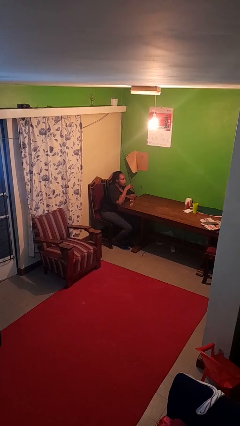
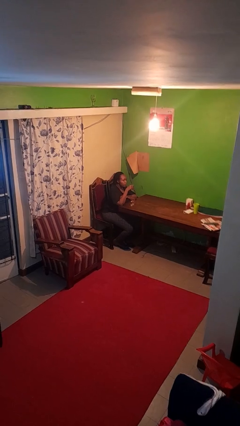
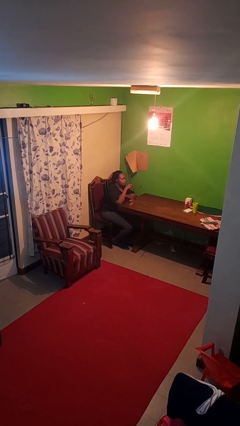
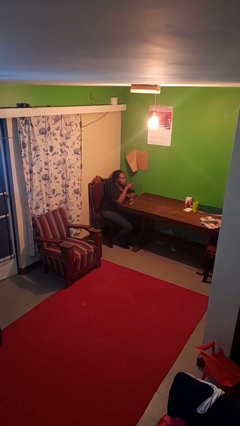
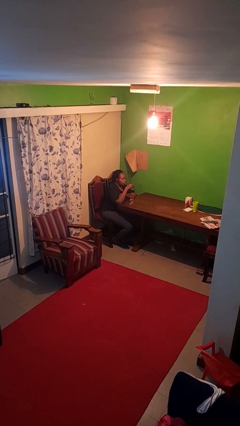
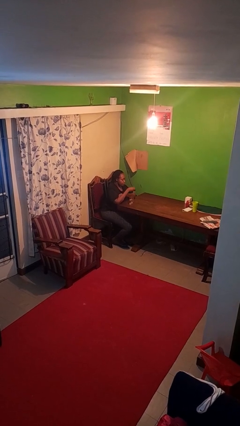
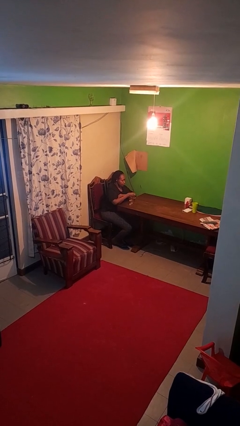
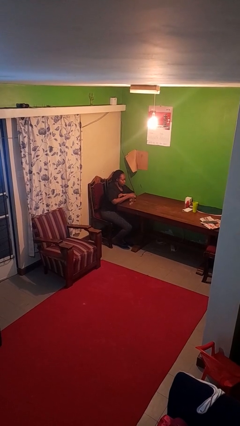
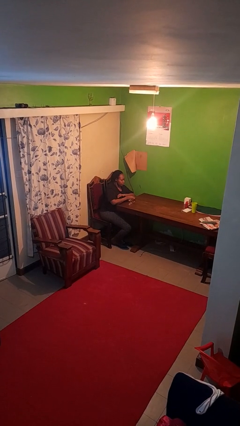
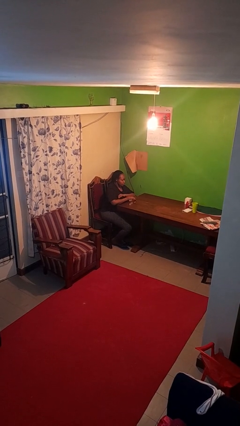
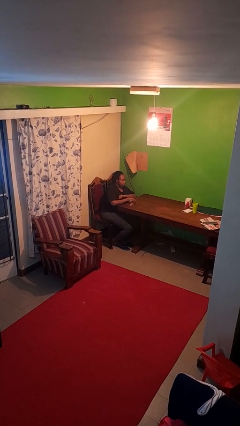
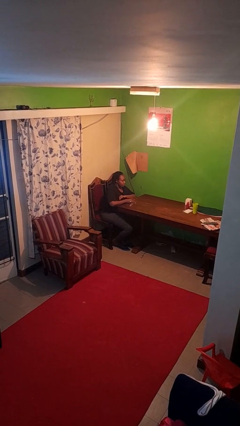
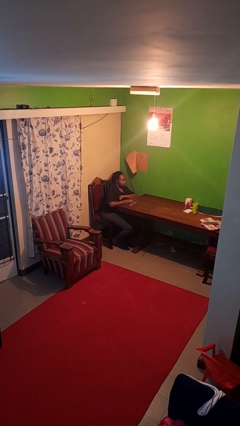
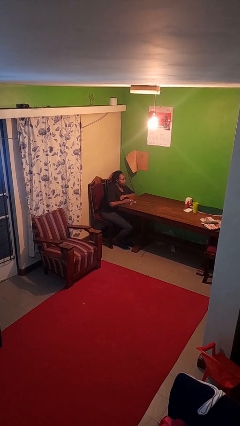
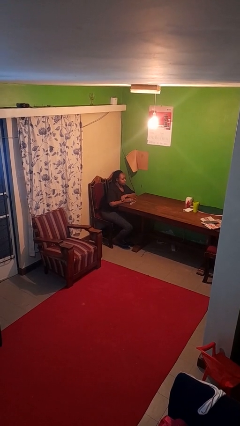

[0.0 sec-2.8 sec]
person puts down object on table

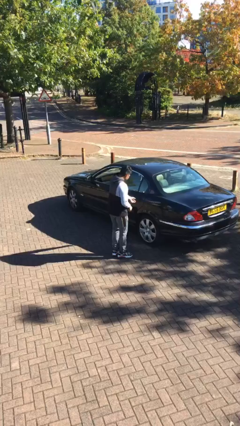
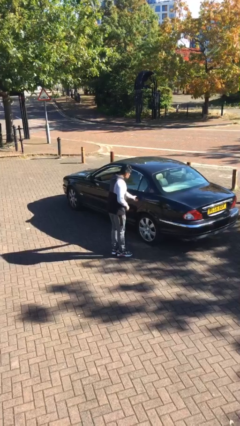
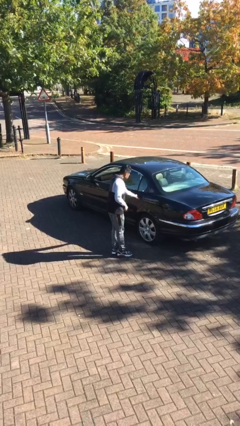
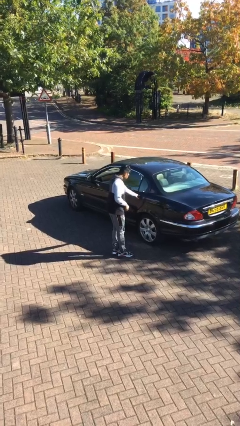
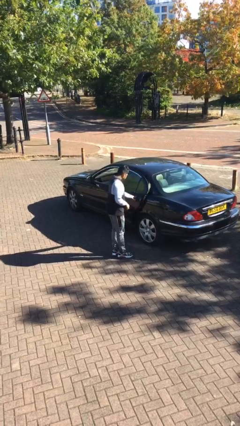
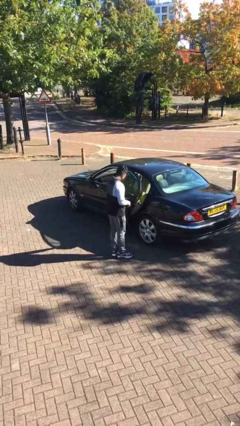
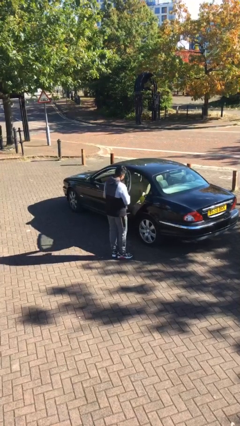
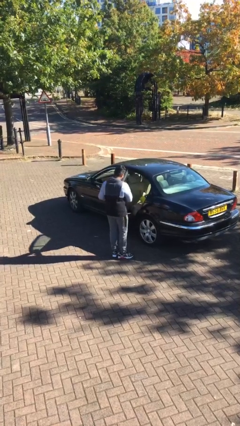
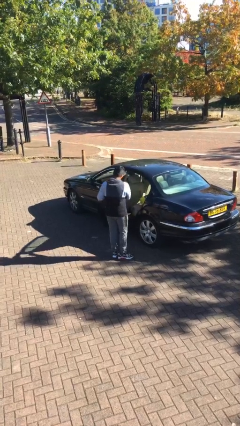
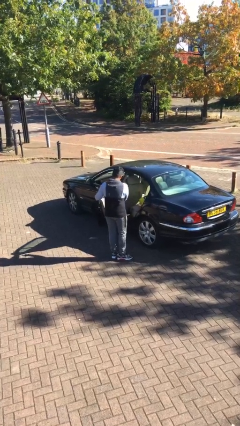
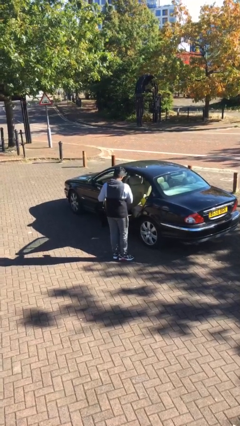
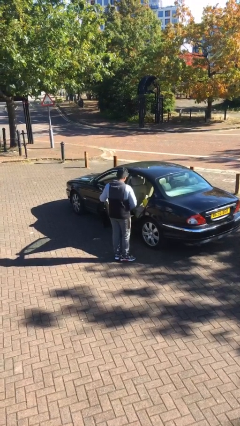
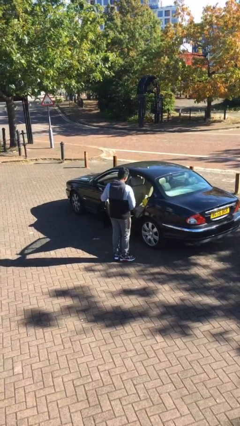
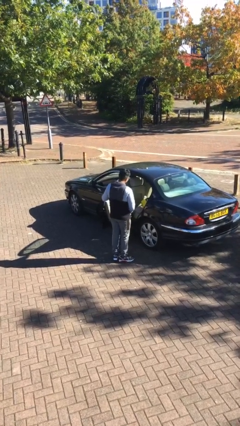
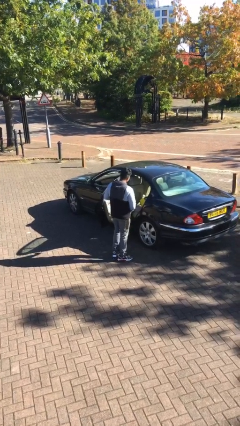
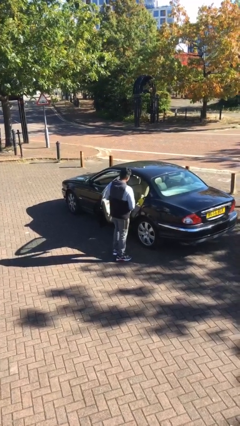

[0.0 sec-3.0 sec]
person opens car door

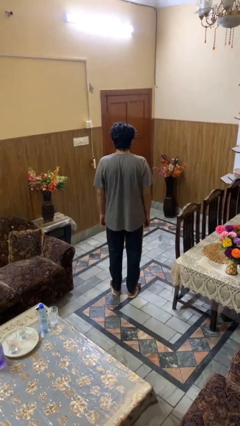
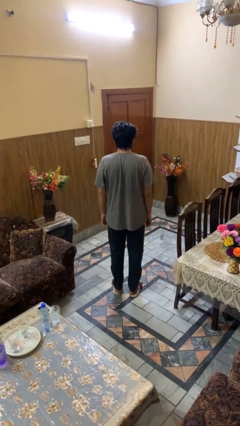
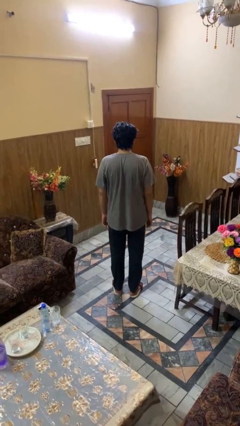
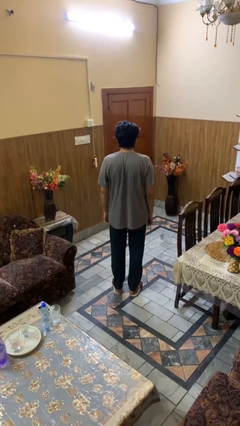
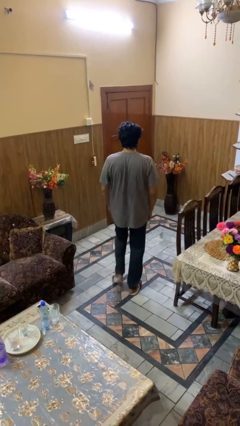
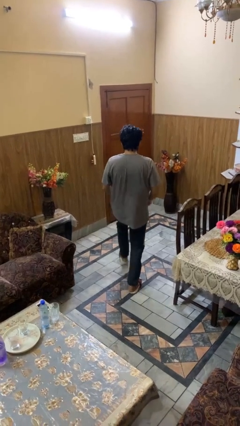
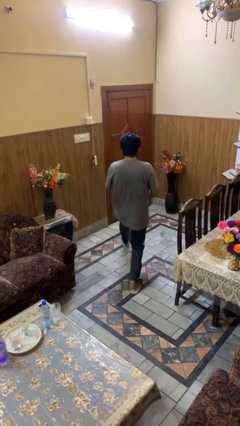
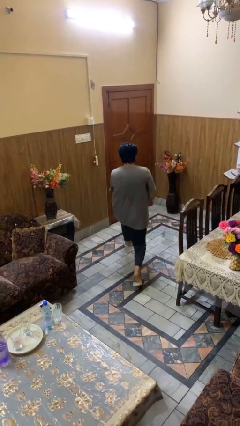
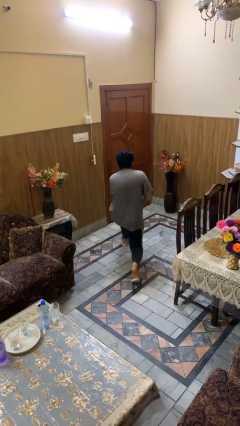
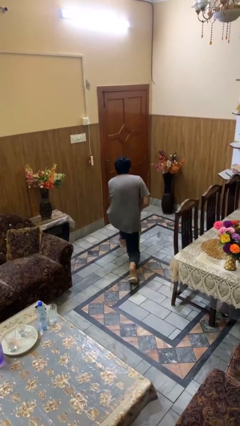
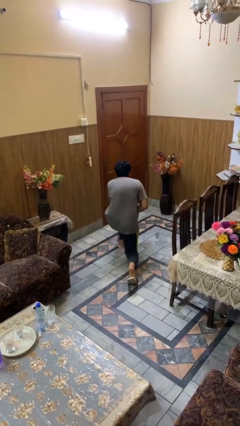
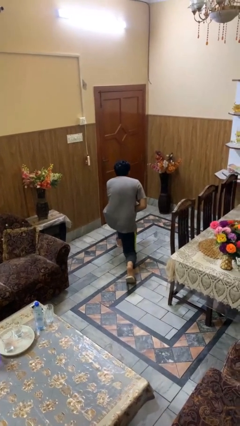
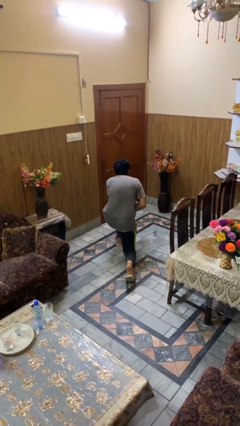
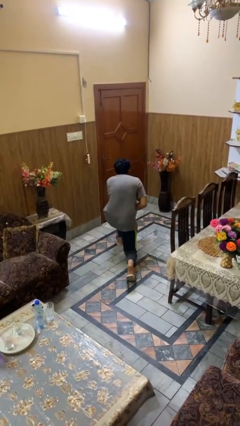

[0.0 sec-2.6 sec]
person kneels

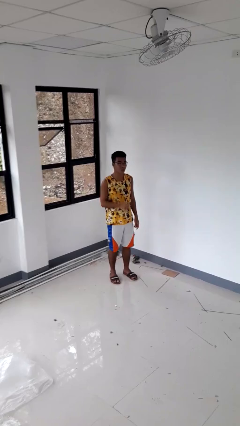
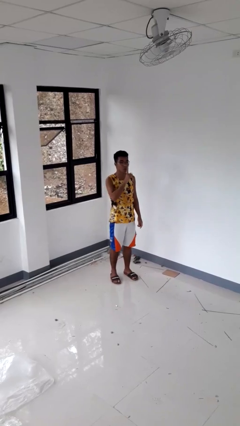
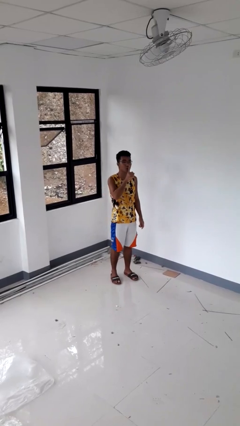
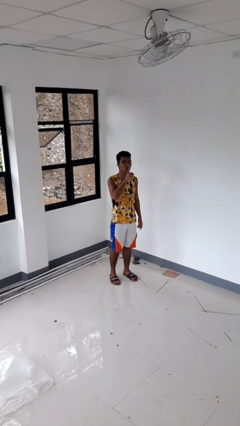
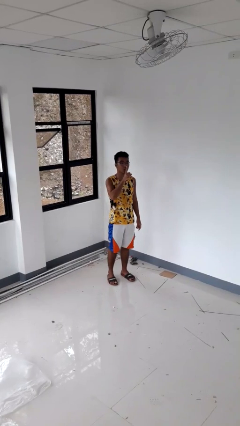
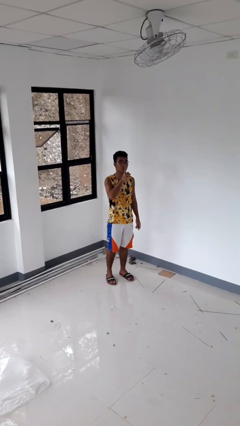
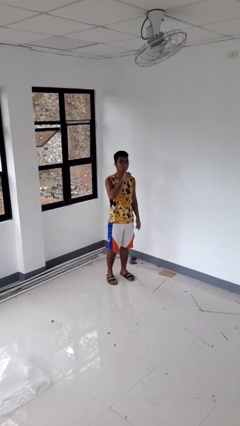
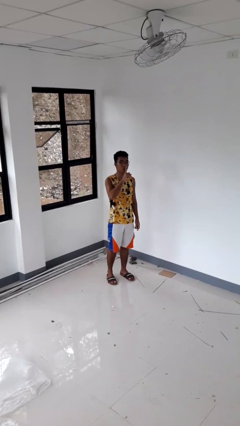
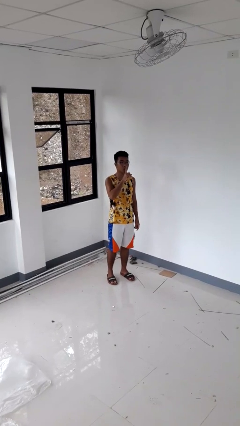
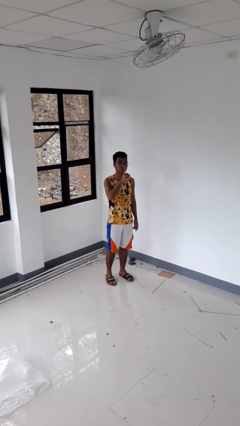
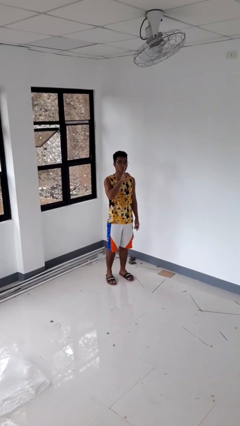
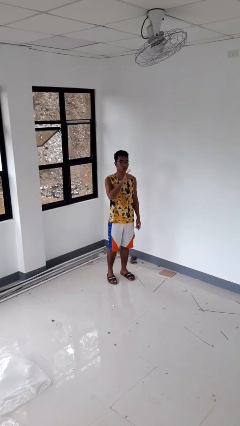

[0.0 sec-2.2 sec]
person gestures be quiet

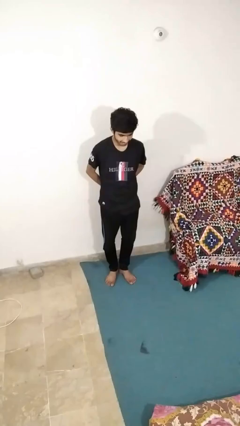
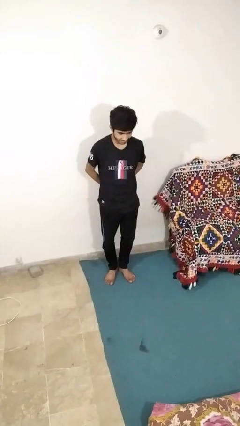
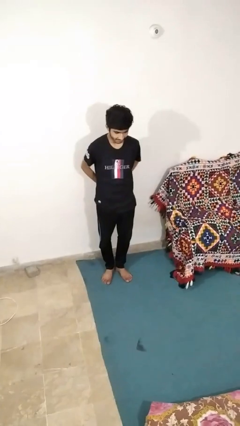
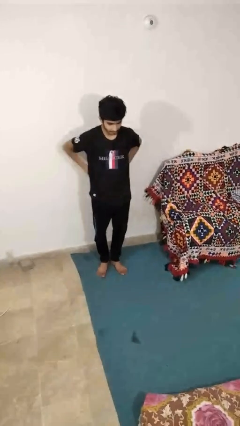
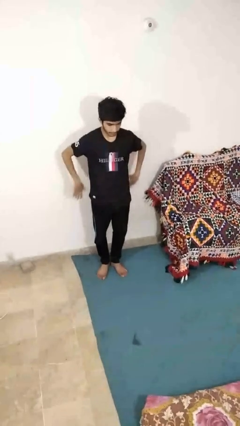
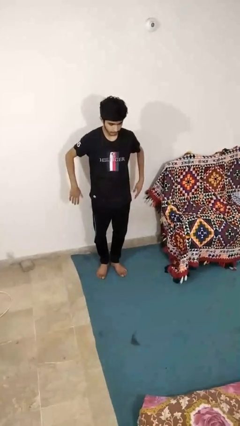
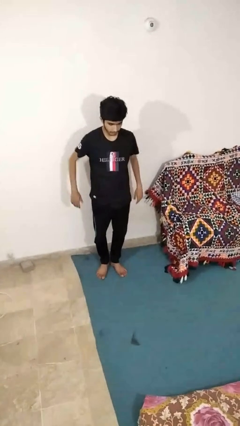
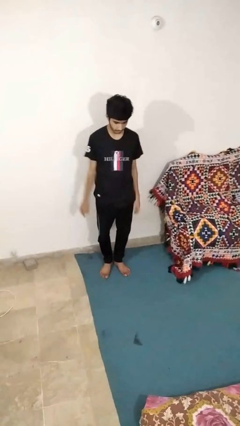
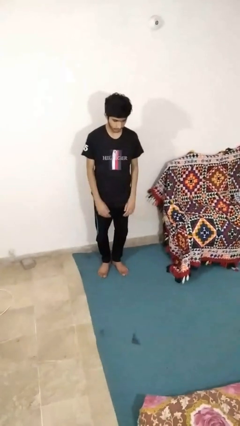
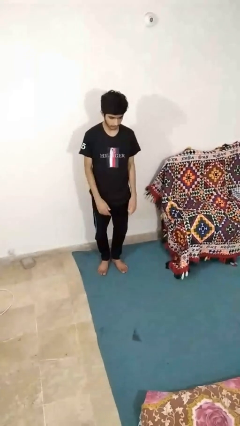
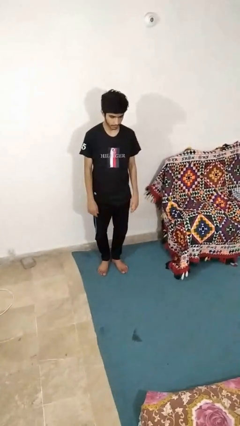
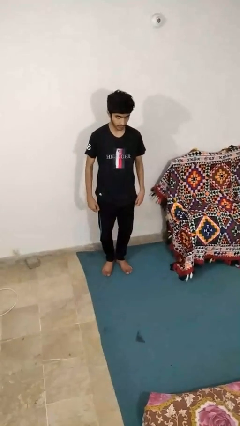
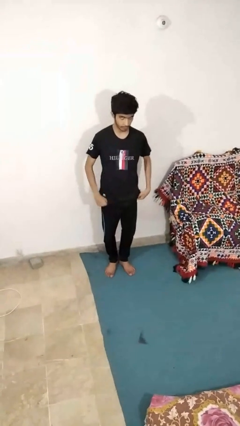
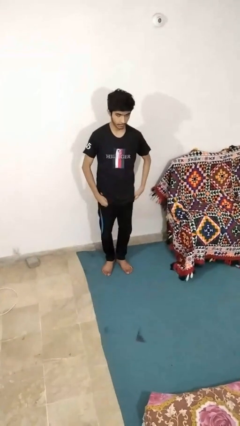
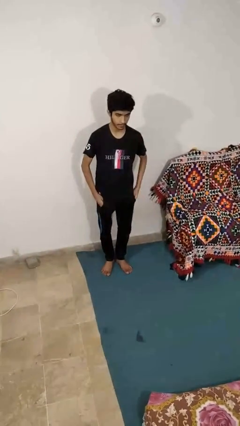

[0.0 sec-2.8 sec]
person puts hands in back pockets

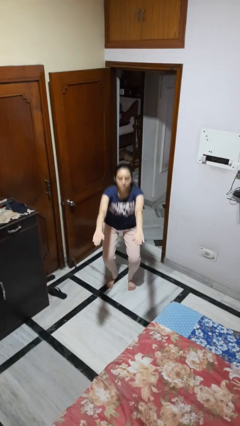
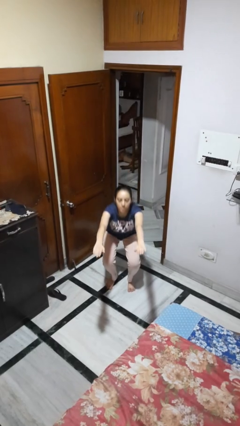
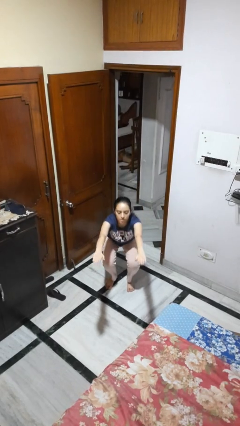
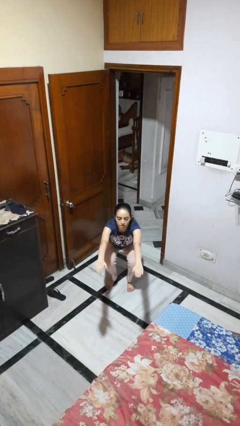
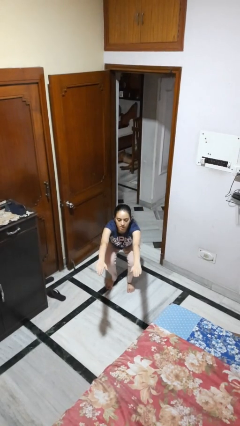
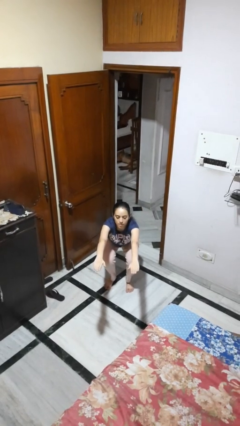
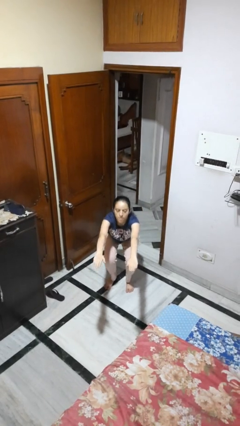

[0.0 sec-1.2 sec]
person squats

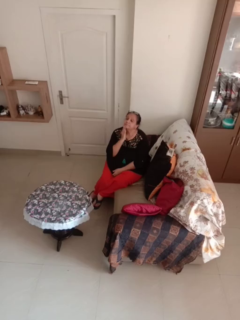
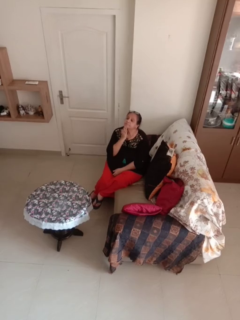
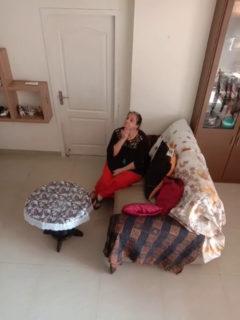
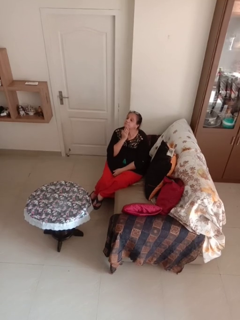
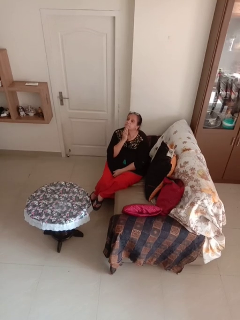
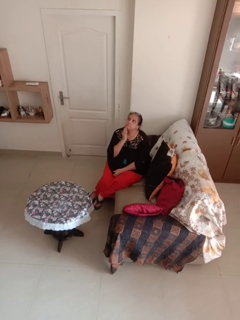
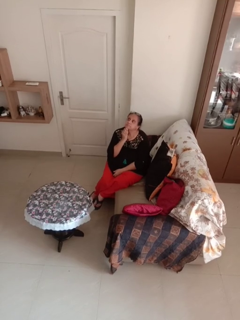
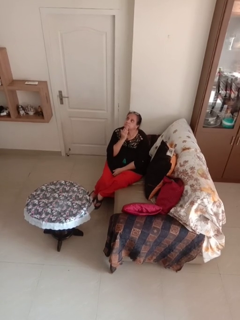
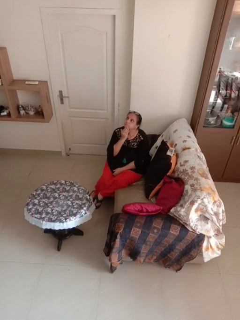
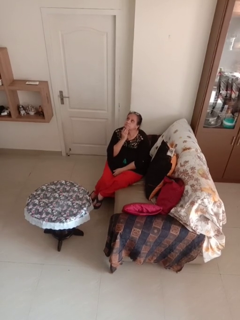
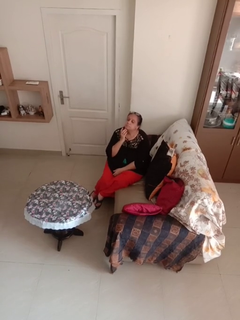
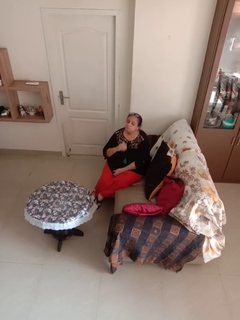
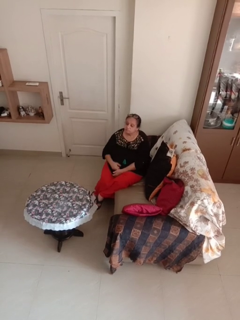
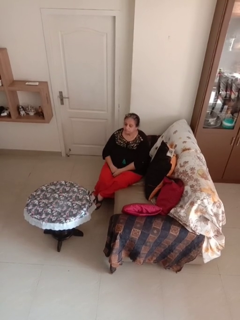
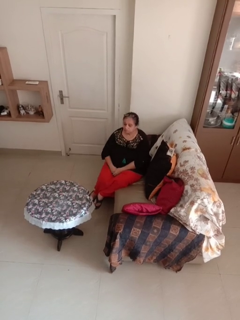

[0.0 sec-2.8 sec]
person strokes chin

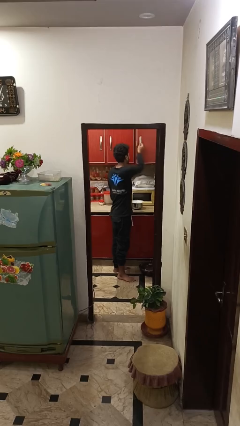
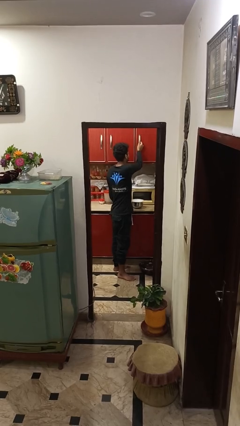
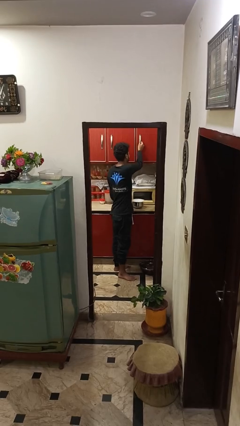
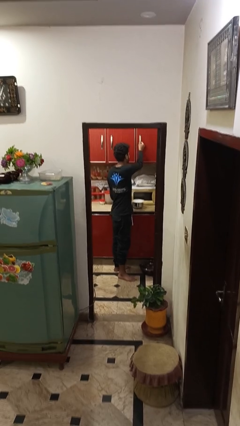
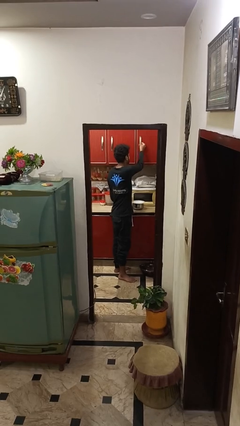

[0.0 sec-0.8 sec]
person closes cabinet
